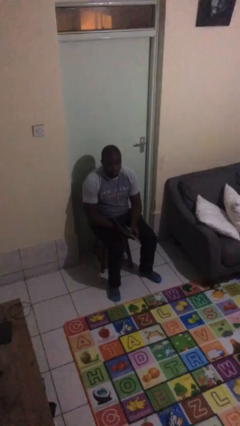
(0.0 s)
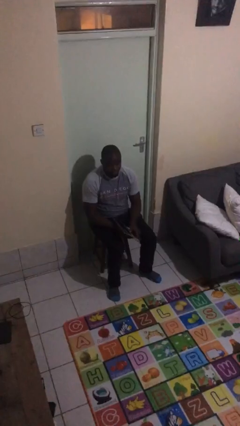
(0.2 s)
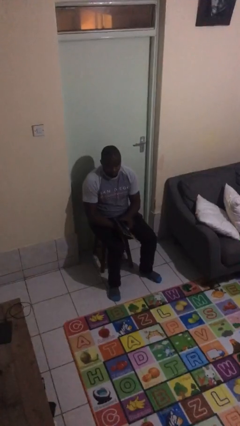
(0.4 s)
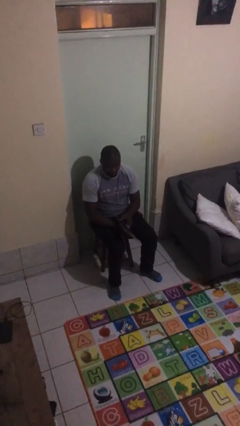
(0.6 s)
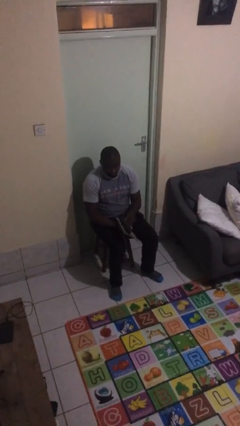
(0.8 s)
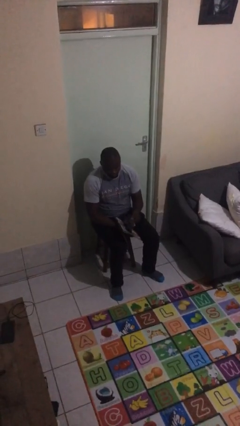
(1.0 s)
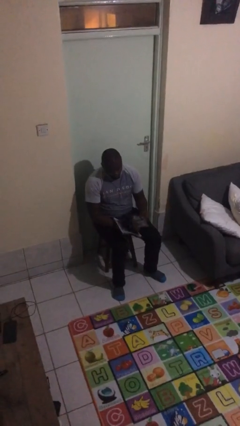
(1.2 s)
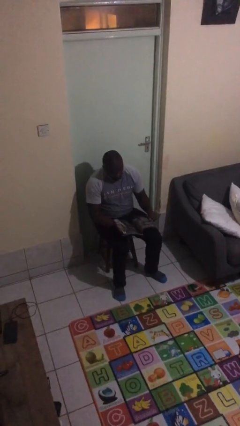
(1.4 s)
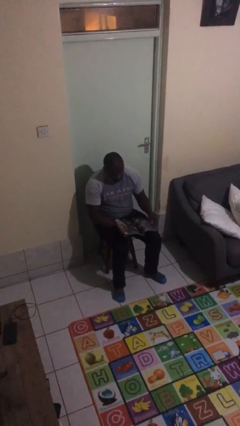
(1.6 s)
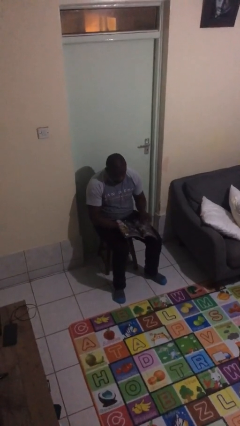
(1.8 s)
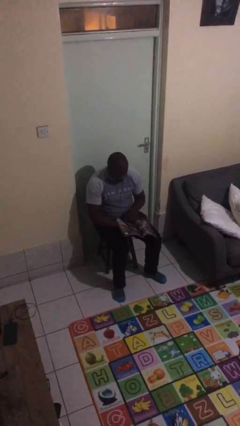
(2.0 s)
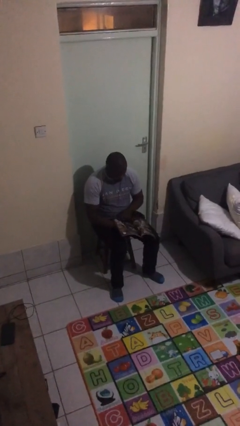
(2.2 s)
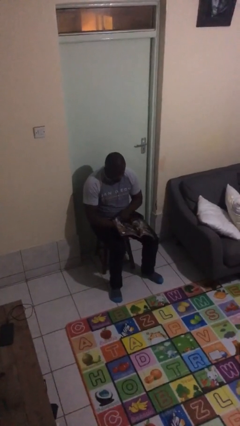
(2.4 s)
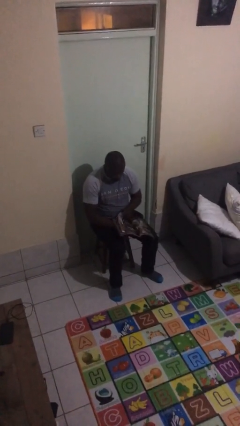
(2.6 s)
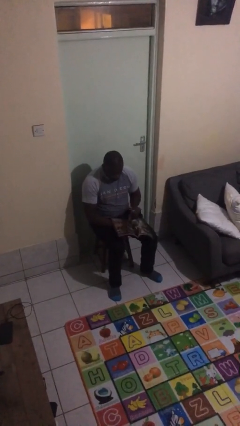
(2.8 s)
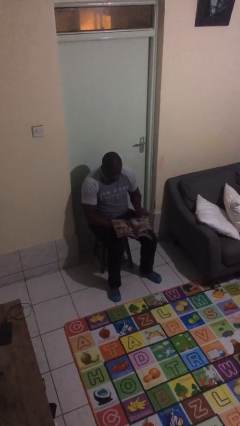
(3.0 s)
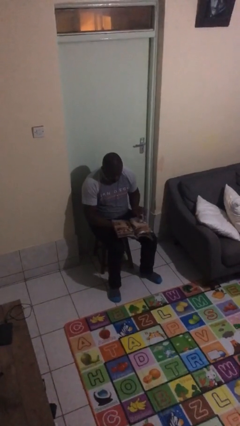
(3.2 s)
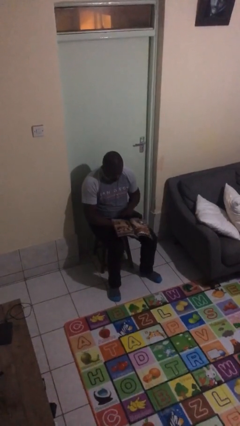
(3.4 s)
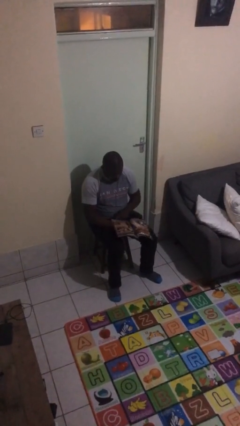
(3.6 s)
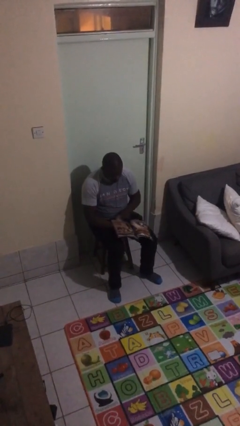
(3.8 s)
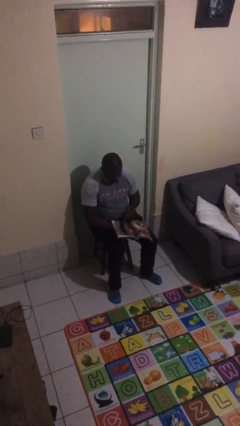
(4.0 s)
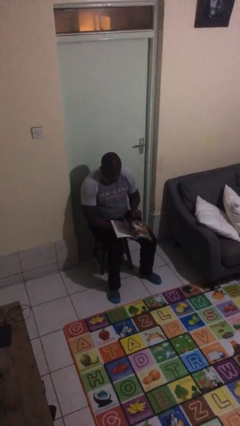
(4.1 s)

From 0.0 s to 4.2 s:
person reads magazine

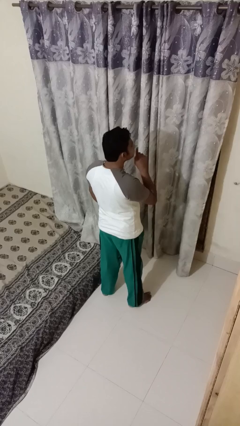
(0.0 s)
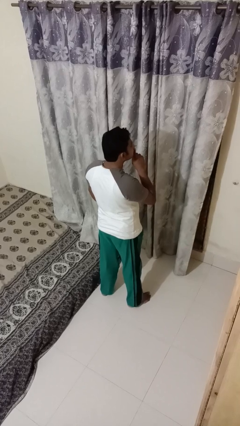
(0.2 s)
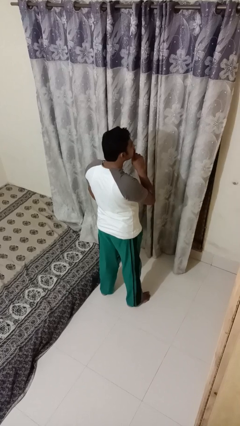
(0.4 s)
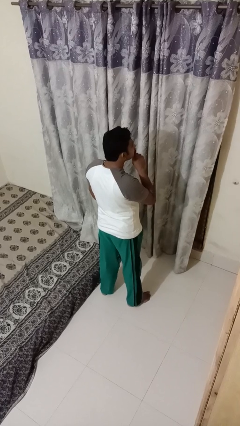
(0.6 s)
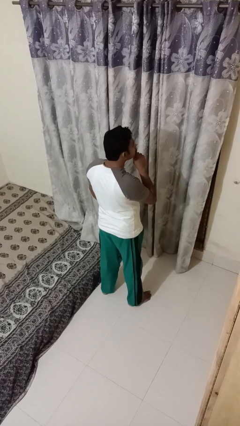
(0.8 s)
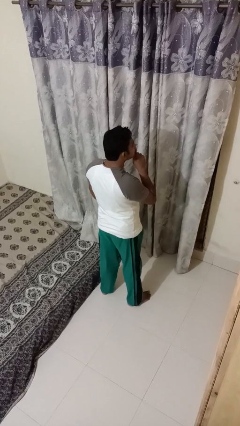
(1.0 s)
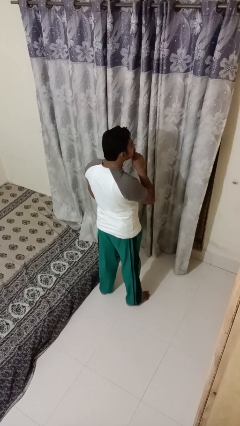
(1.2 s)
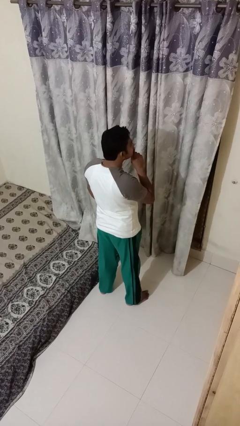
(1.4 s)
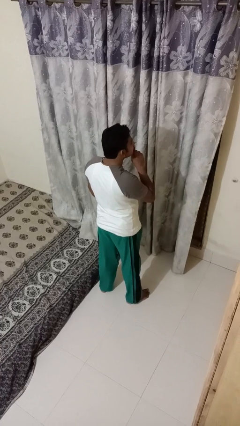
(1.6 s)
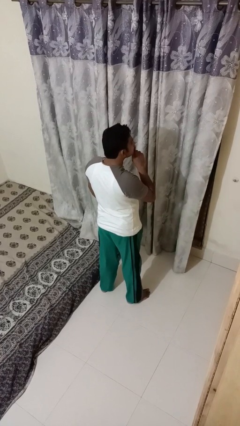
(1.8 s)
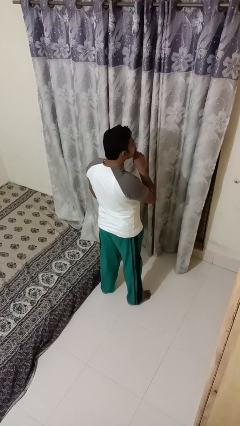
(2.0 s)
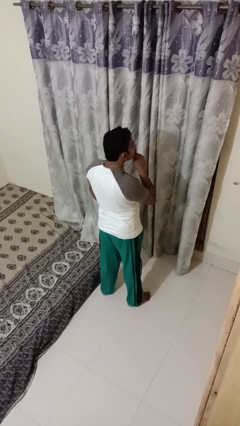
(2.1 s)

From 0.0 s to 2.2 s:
person gestures be quiet

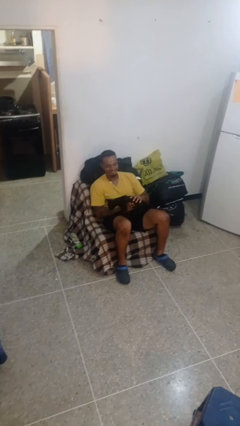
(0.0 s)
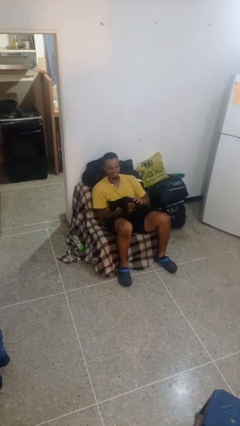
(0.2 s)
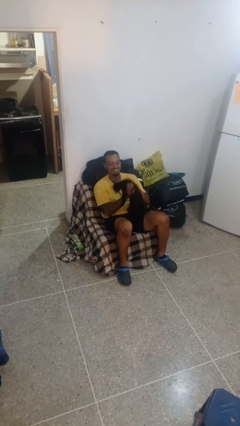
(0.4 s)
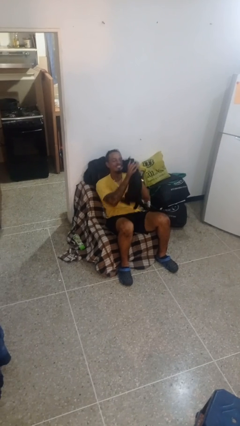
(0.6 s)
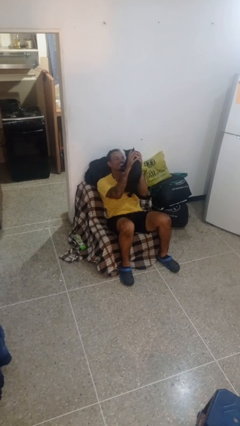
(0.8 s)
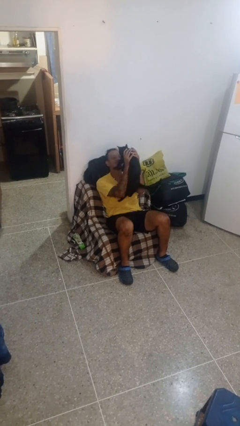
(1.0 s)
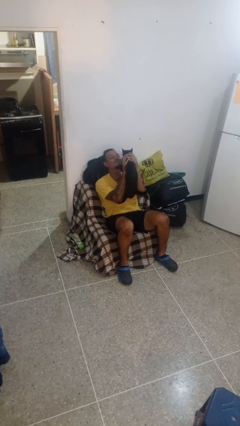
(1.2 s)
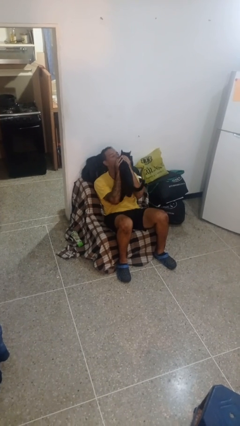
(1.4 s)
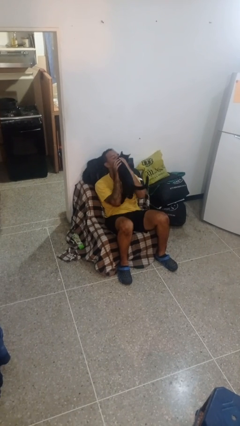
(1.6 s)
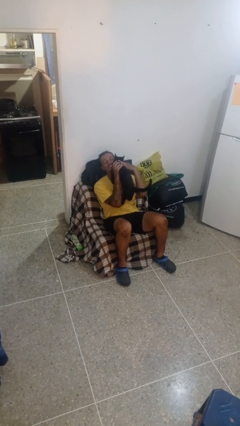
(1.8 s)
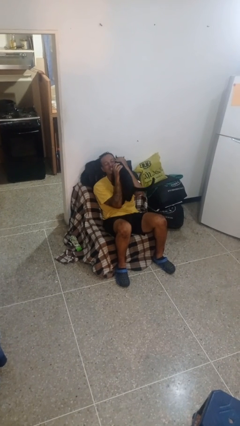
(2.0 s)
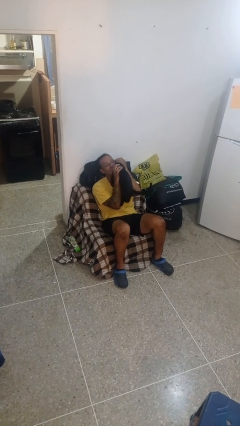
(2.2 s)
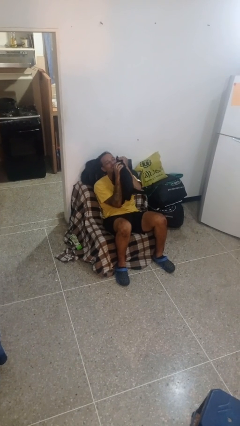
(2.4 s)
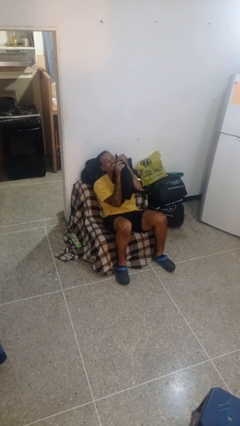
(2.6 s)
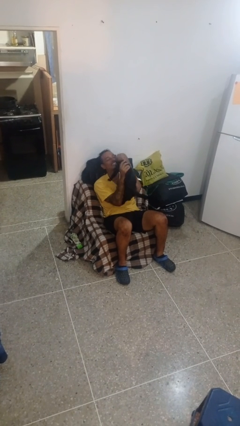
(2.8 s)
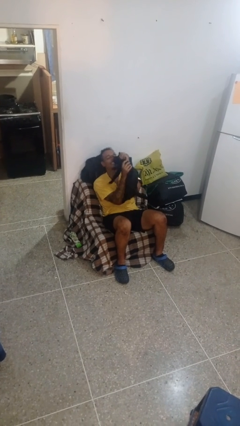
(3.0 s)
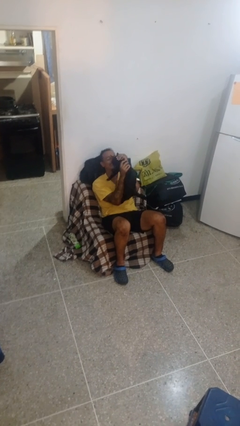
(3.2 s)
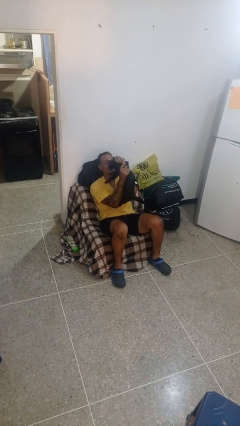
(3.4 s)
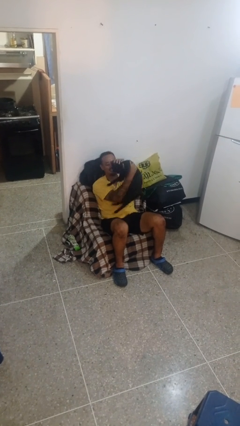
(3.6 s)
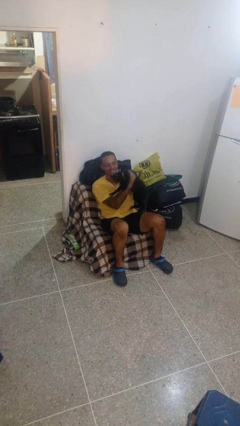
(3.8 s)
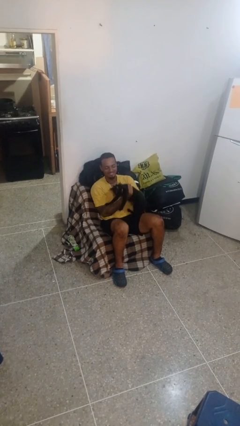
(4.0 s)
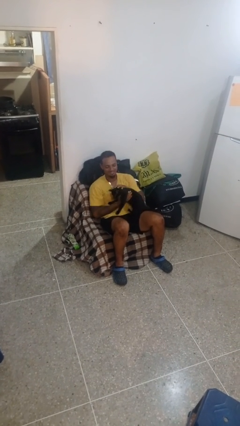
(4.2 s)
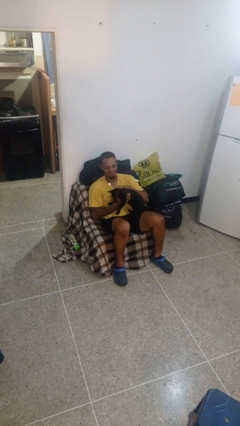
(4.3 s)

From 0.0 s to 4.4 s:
person hugs cat

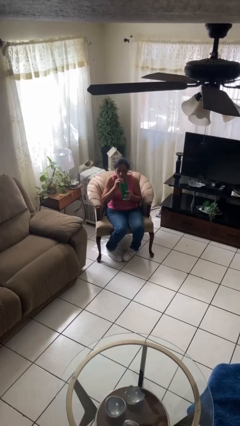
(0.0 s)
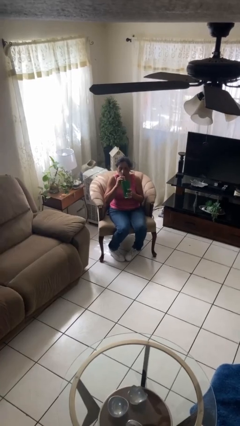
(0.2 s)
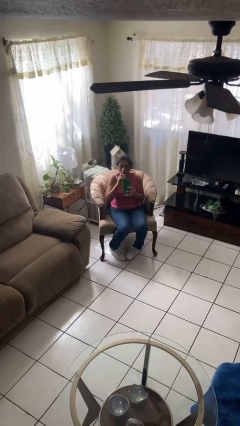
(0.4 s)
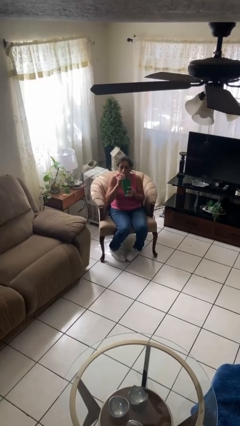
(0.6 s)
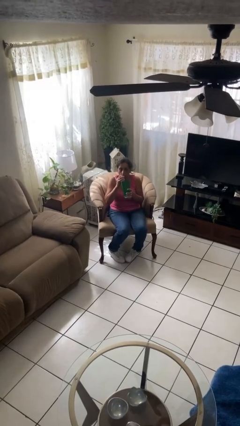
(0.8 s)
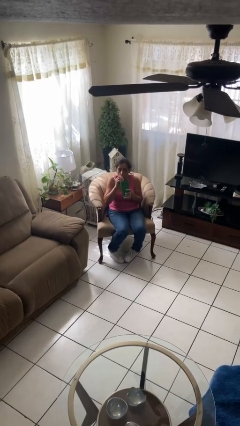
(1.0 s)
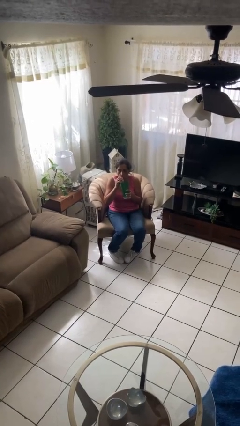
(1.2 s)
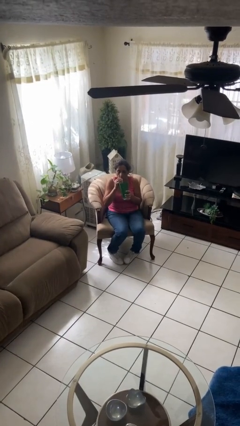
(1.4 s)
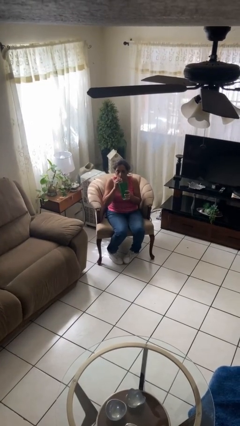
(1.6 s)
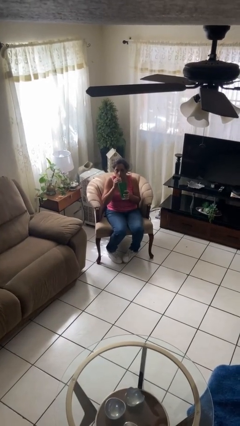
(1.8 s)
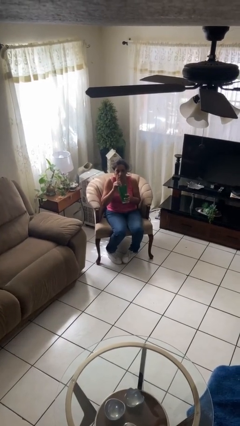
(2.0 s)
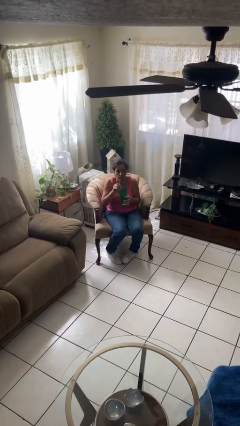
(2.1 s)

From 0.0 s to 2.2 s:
person drinks from straw

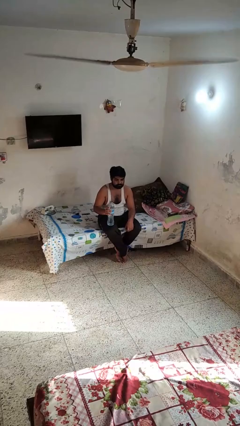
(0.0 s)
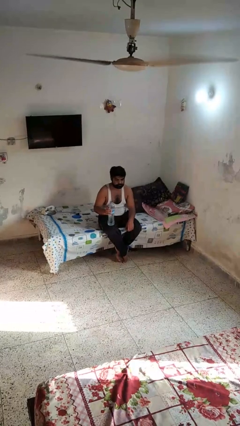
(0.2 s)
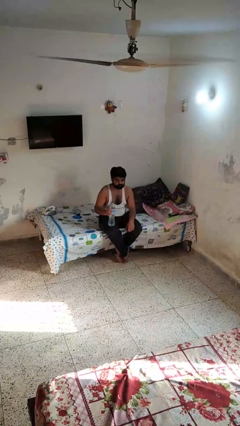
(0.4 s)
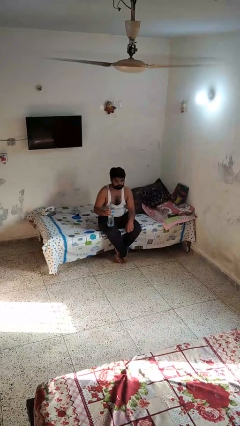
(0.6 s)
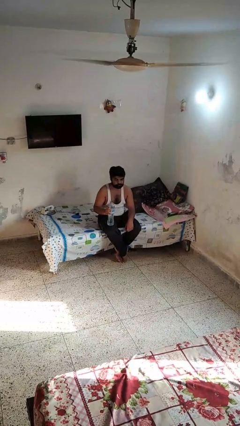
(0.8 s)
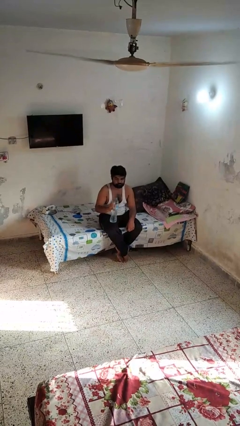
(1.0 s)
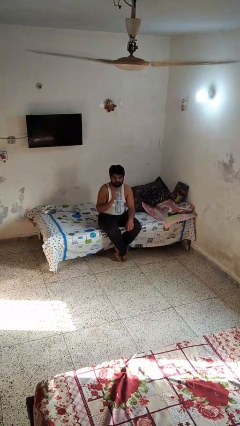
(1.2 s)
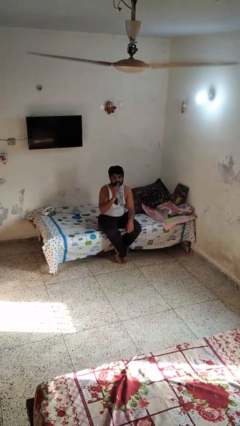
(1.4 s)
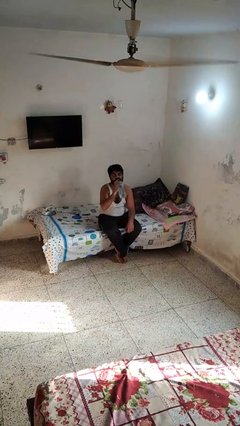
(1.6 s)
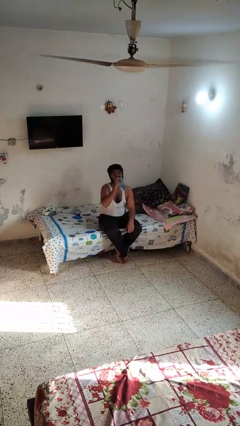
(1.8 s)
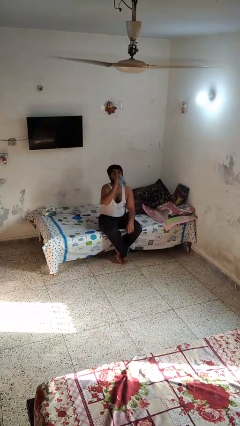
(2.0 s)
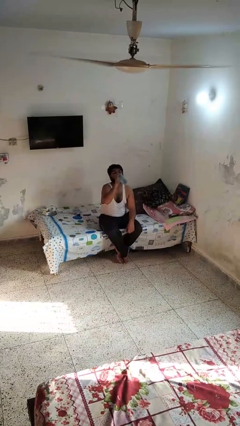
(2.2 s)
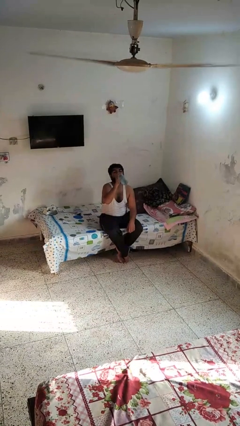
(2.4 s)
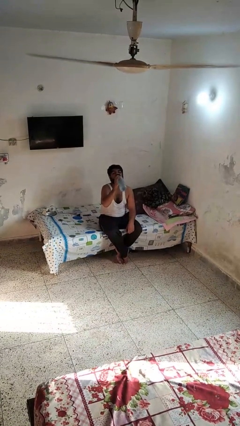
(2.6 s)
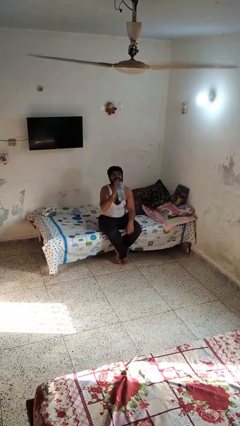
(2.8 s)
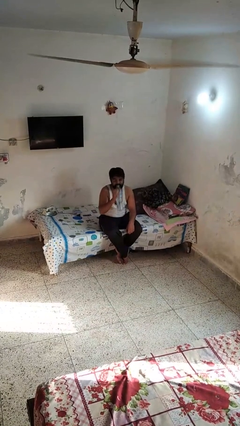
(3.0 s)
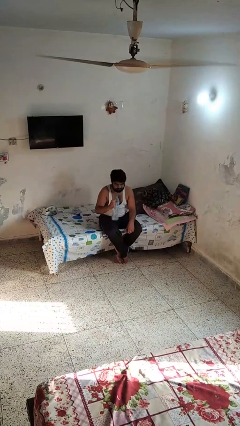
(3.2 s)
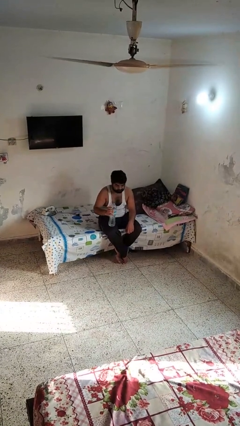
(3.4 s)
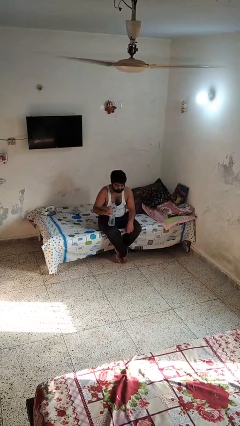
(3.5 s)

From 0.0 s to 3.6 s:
person drinks from bottle

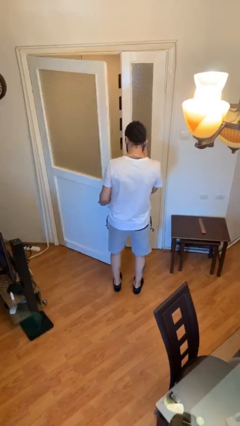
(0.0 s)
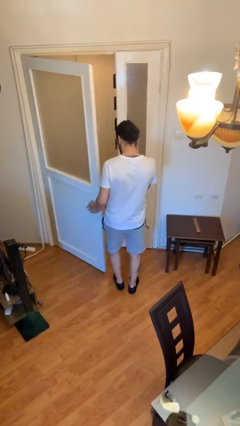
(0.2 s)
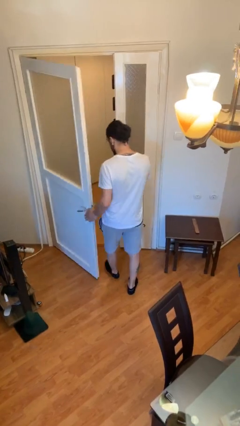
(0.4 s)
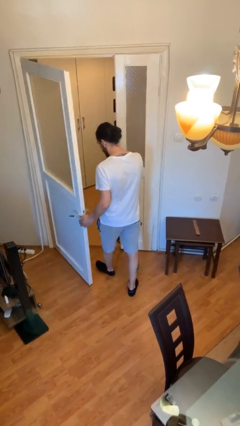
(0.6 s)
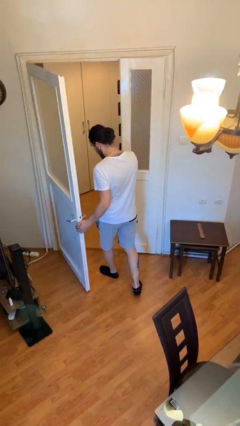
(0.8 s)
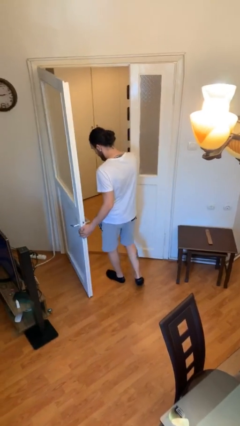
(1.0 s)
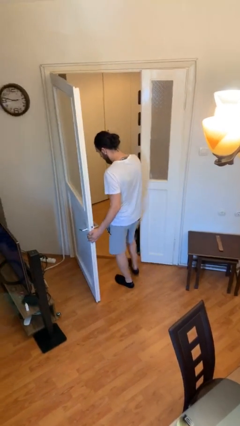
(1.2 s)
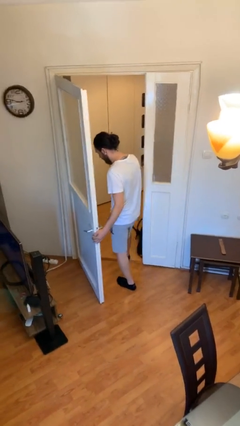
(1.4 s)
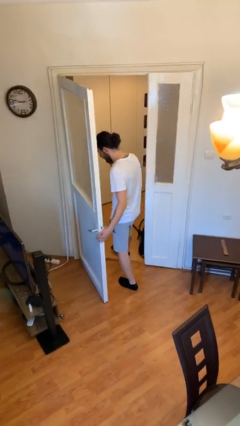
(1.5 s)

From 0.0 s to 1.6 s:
person exits scene through structure
